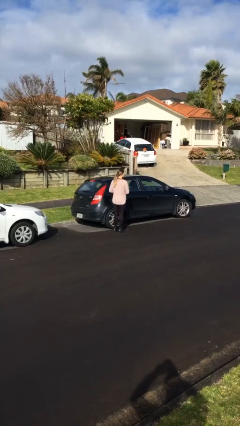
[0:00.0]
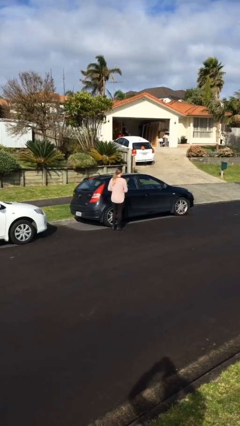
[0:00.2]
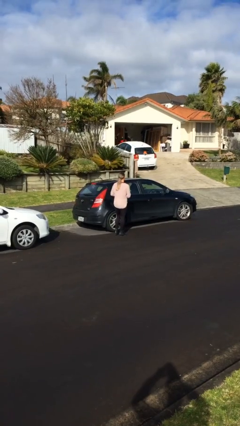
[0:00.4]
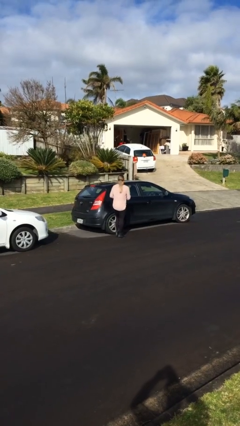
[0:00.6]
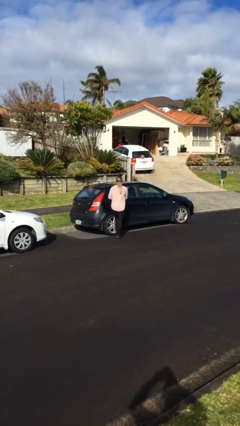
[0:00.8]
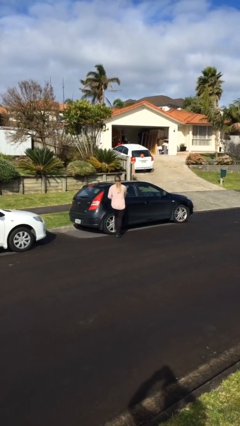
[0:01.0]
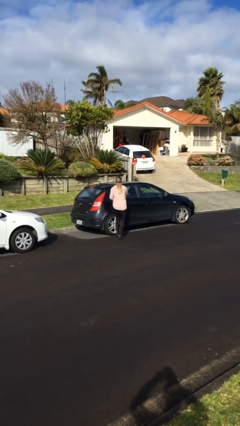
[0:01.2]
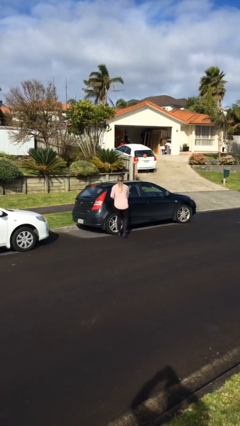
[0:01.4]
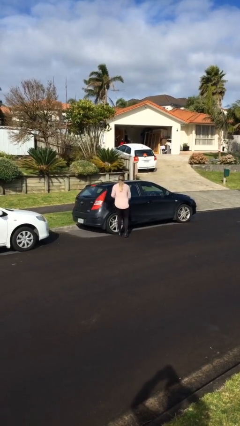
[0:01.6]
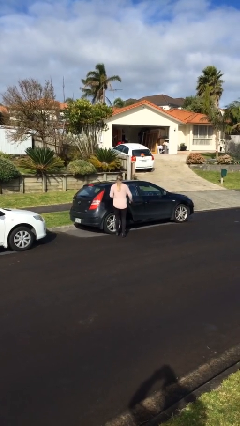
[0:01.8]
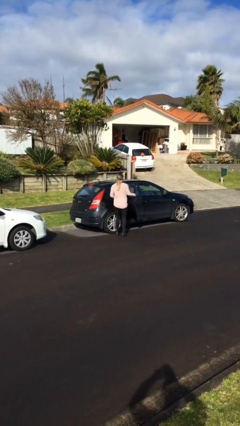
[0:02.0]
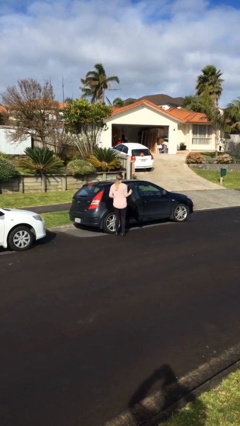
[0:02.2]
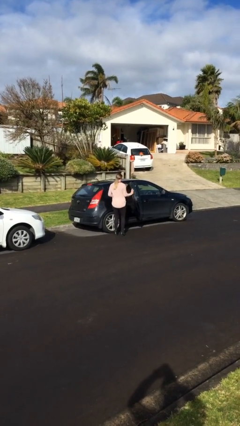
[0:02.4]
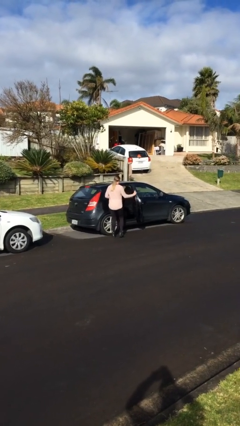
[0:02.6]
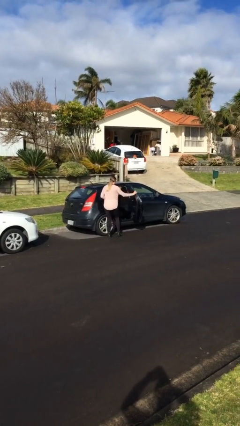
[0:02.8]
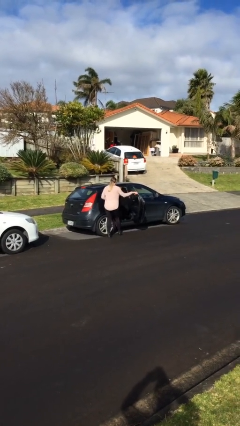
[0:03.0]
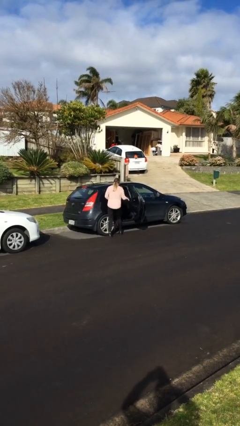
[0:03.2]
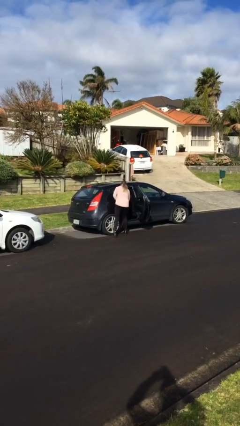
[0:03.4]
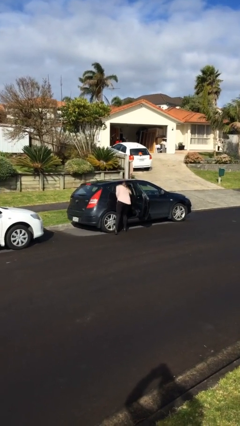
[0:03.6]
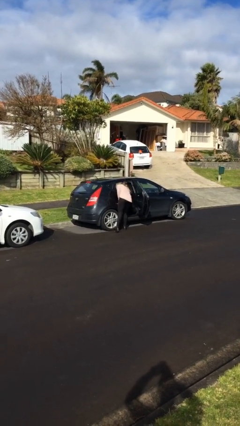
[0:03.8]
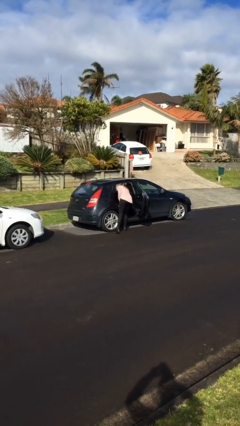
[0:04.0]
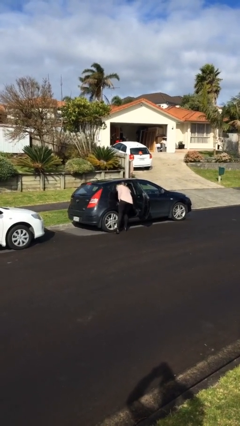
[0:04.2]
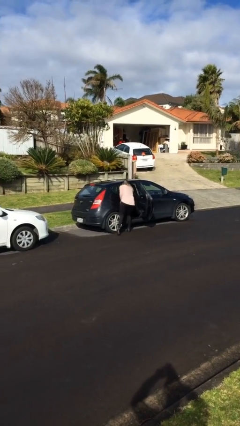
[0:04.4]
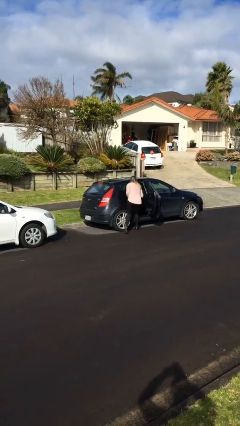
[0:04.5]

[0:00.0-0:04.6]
person opens car door

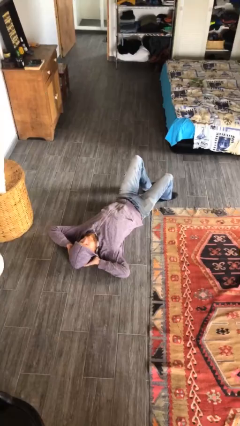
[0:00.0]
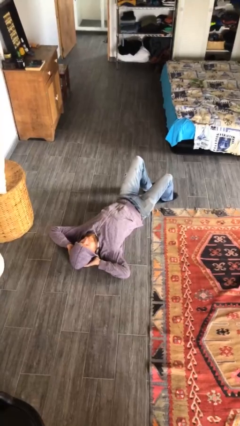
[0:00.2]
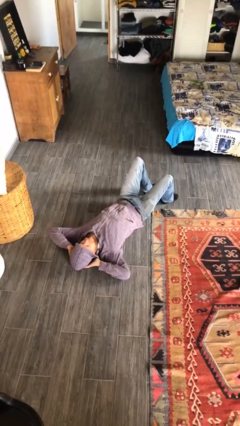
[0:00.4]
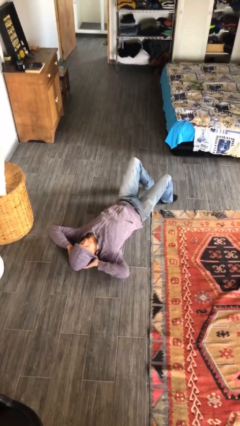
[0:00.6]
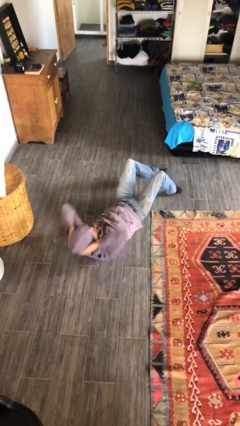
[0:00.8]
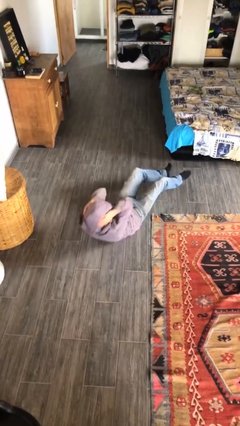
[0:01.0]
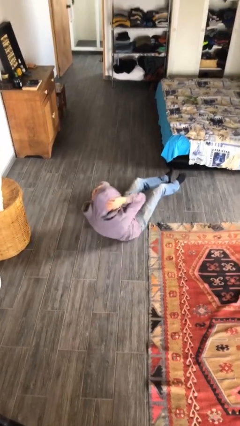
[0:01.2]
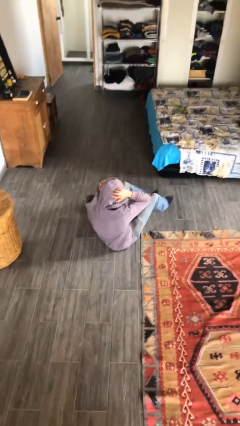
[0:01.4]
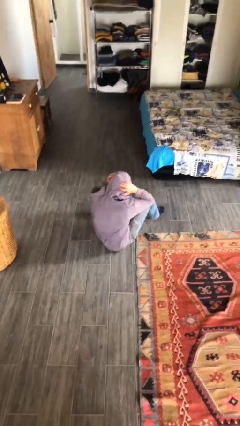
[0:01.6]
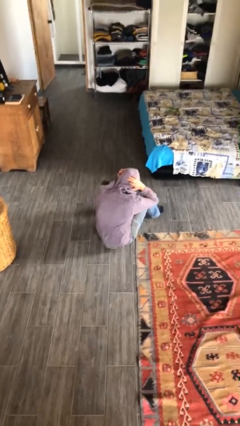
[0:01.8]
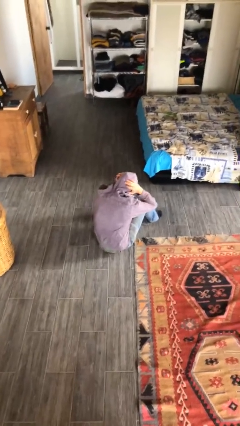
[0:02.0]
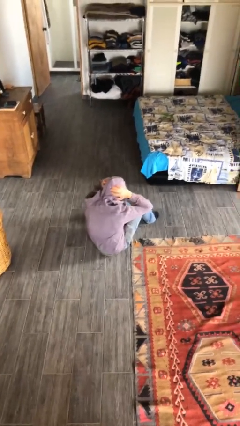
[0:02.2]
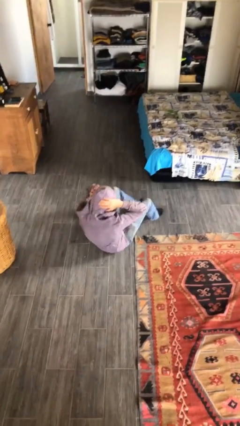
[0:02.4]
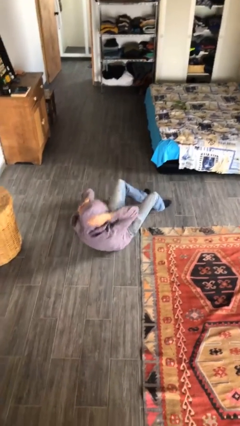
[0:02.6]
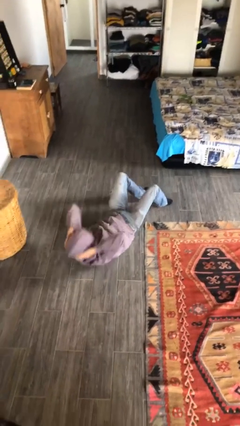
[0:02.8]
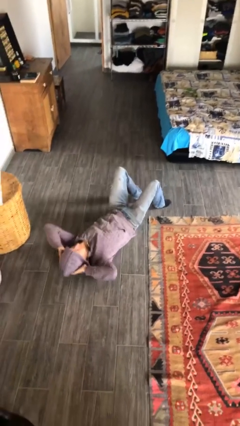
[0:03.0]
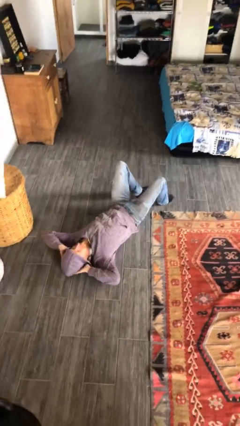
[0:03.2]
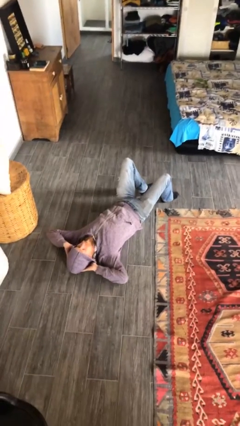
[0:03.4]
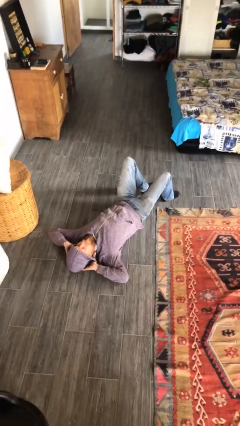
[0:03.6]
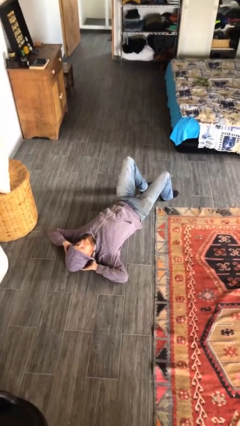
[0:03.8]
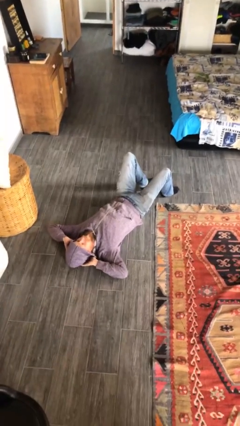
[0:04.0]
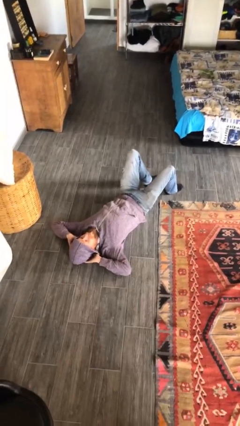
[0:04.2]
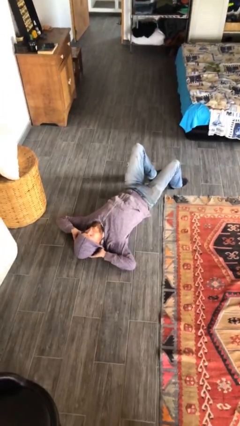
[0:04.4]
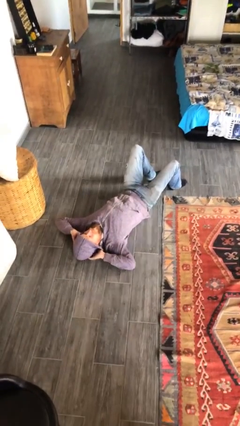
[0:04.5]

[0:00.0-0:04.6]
person exercises with situp

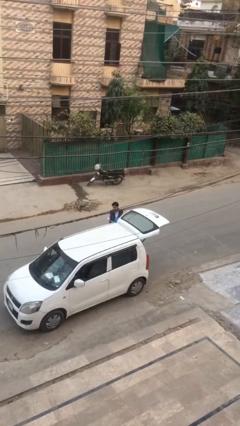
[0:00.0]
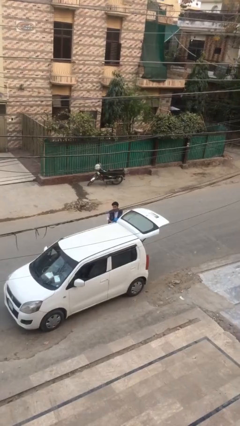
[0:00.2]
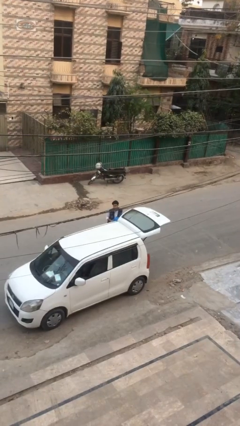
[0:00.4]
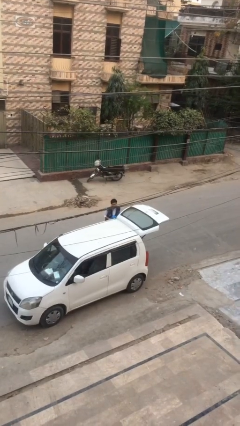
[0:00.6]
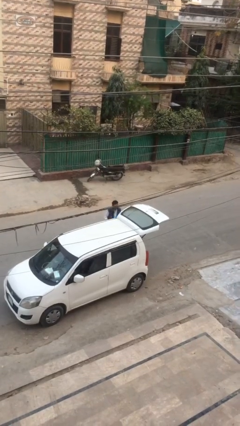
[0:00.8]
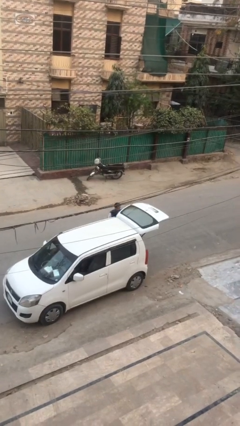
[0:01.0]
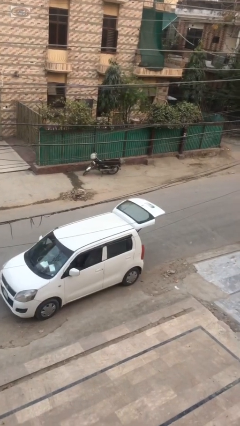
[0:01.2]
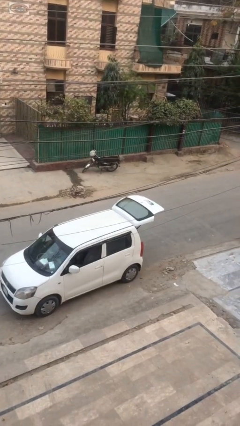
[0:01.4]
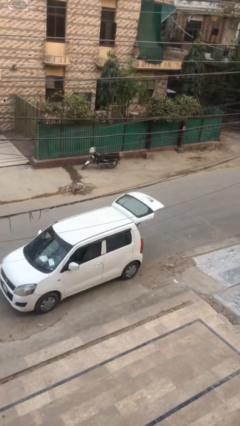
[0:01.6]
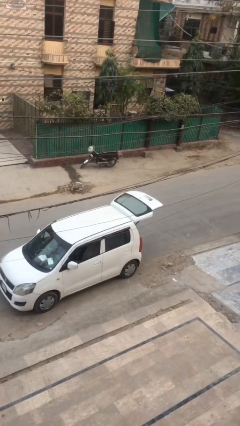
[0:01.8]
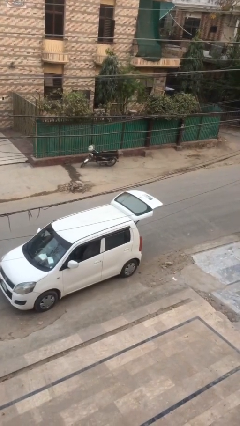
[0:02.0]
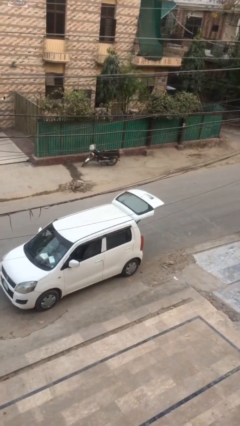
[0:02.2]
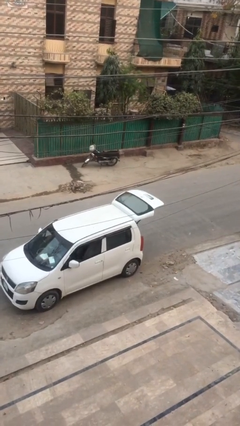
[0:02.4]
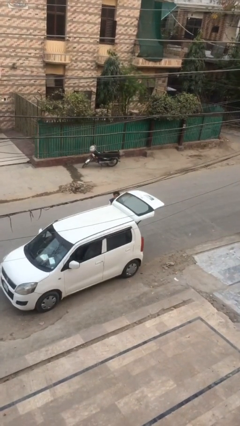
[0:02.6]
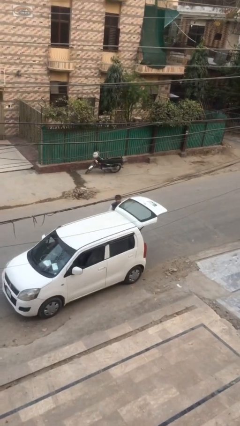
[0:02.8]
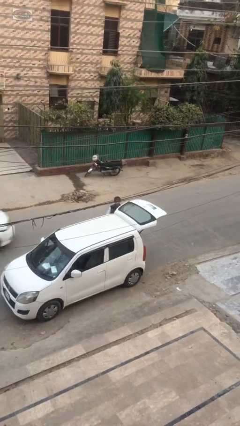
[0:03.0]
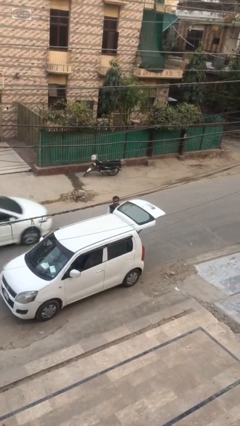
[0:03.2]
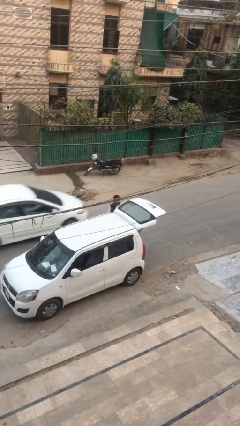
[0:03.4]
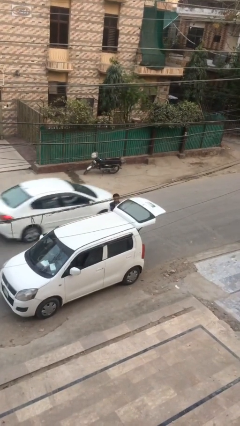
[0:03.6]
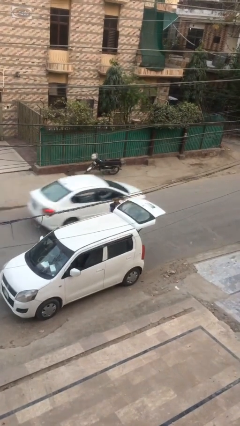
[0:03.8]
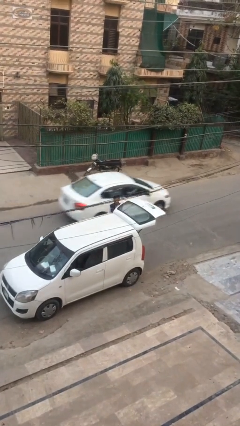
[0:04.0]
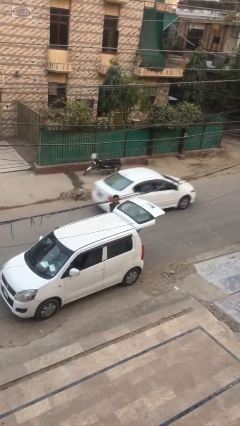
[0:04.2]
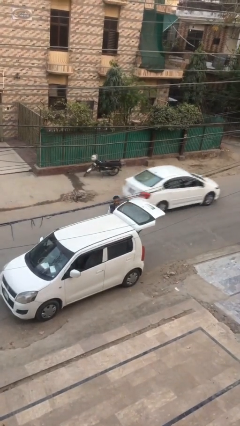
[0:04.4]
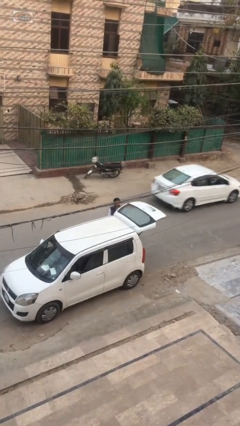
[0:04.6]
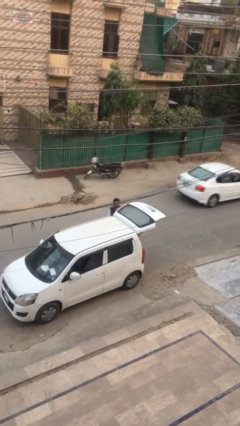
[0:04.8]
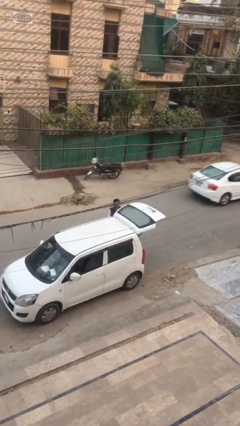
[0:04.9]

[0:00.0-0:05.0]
person loads car

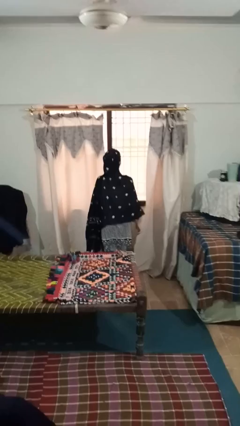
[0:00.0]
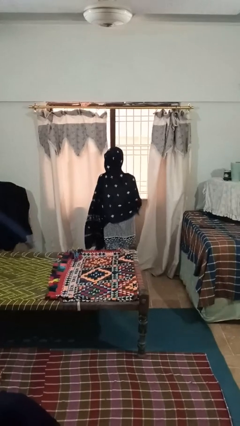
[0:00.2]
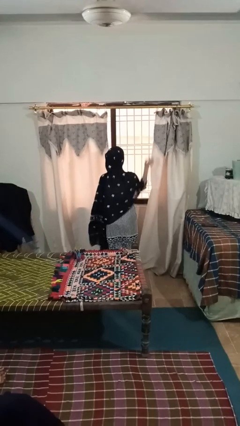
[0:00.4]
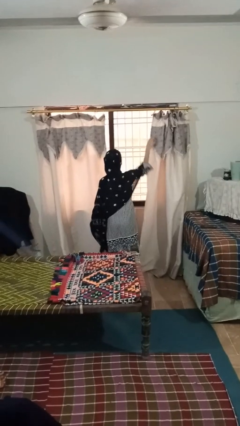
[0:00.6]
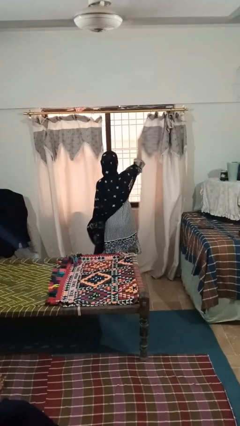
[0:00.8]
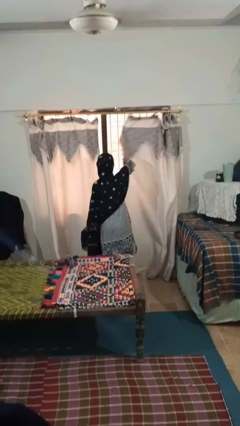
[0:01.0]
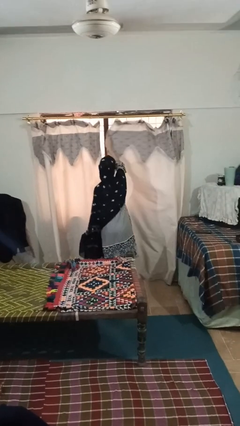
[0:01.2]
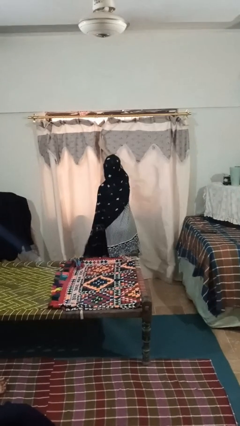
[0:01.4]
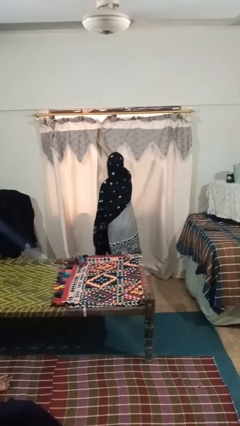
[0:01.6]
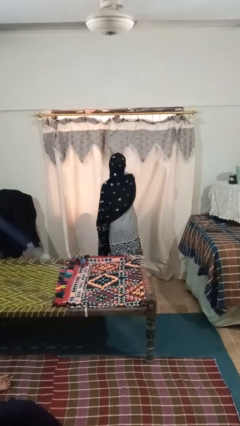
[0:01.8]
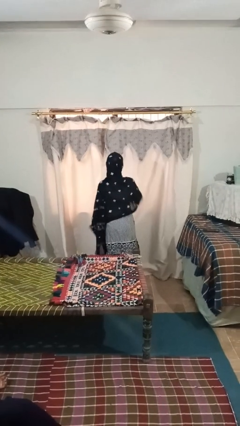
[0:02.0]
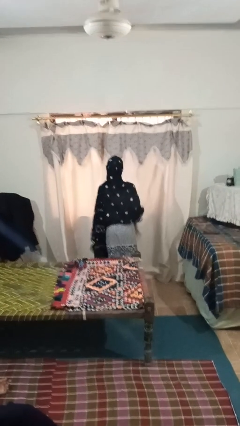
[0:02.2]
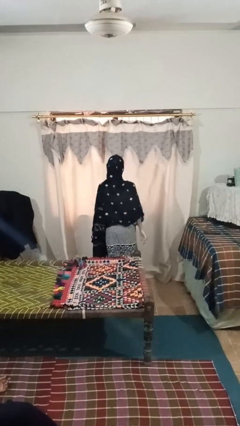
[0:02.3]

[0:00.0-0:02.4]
person closes curtains

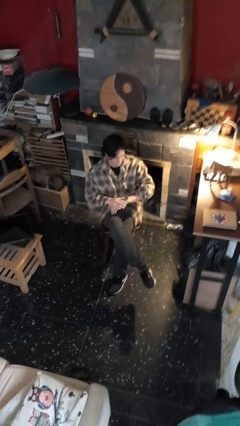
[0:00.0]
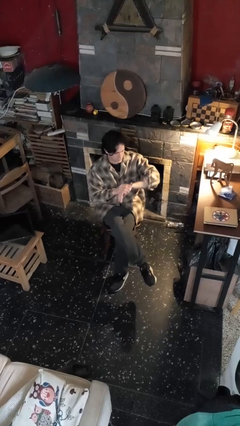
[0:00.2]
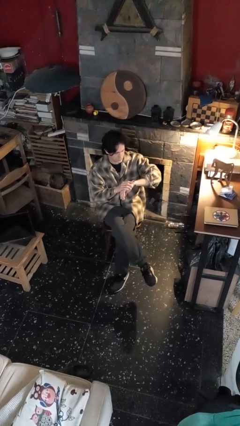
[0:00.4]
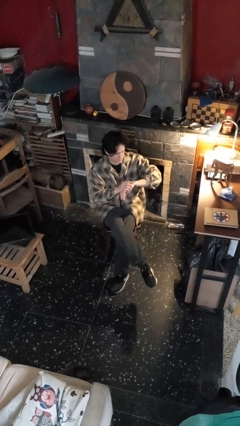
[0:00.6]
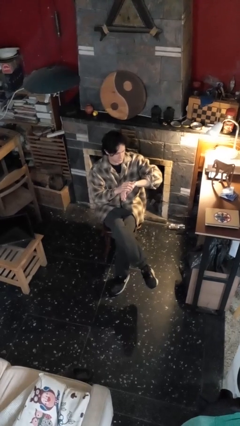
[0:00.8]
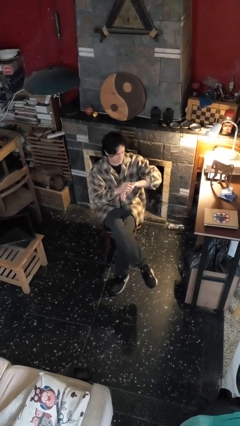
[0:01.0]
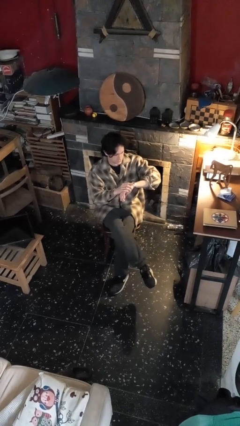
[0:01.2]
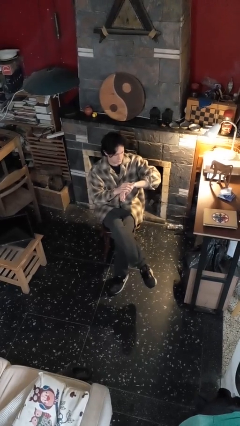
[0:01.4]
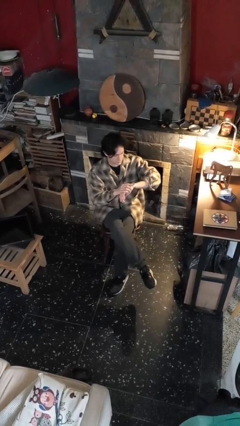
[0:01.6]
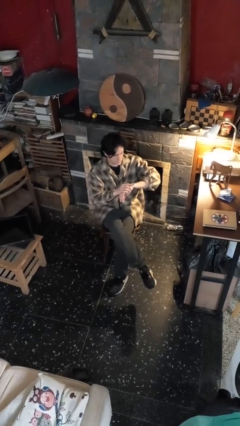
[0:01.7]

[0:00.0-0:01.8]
person looks at wristwatch
